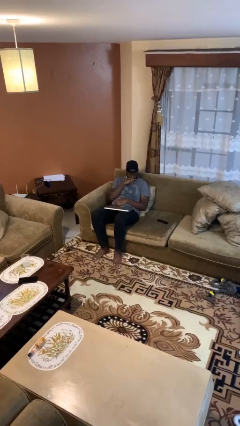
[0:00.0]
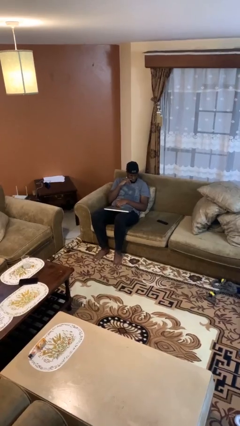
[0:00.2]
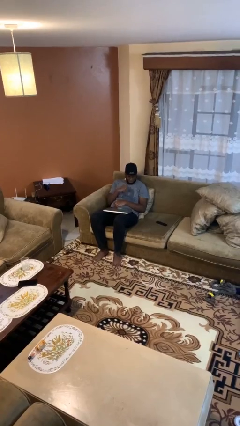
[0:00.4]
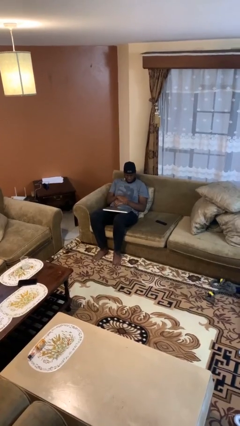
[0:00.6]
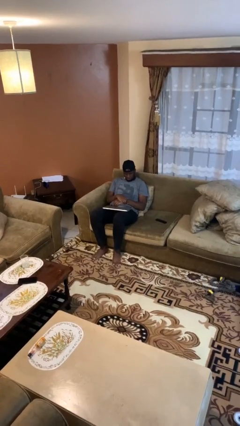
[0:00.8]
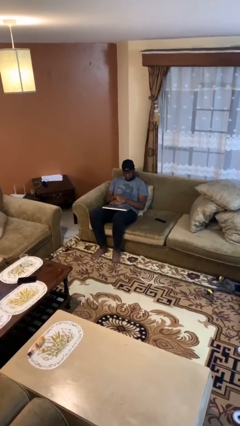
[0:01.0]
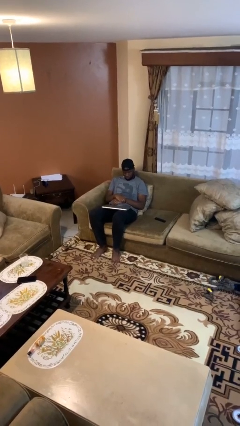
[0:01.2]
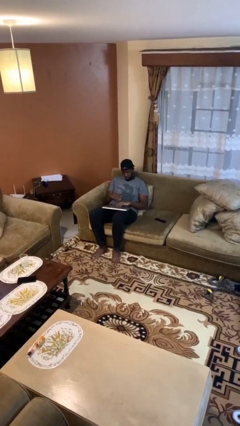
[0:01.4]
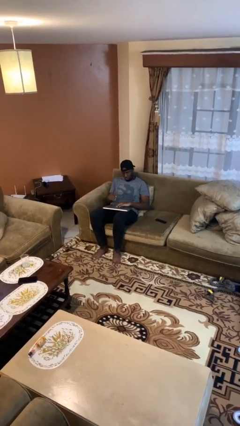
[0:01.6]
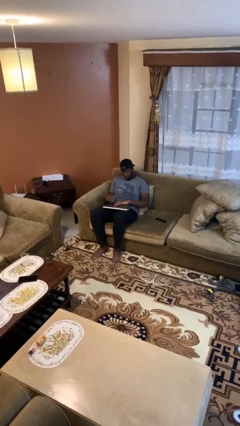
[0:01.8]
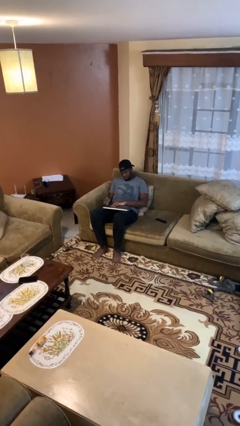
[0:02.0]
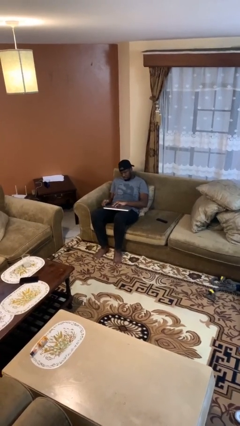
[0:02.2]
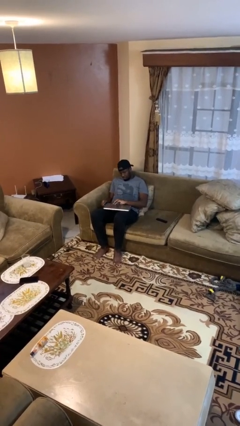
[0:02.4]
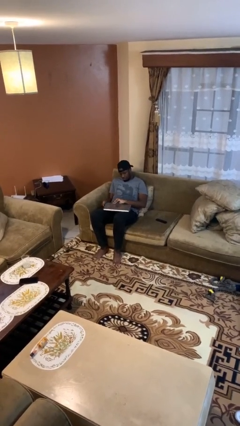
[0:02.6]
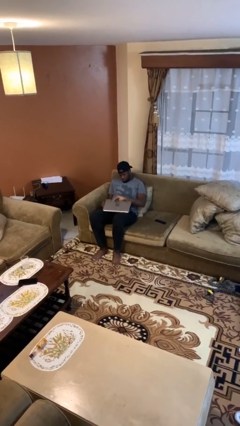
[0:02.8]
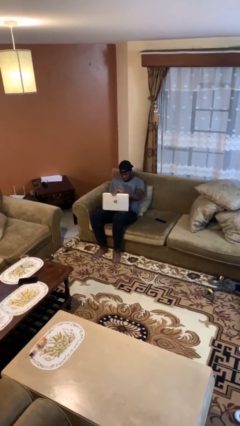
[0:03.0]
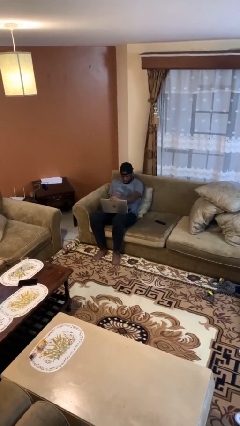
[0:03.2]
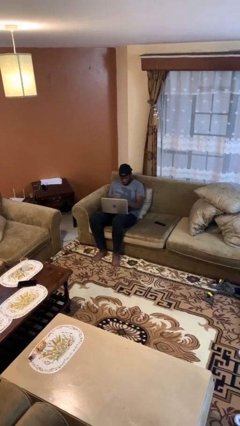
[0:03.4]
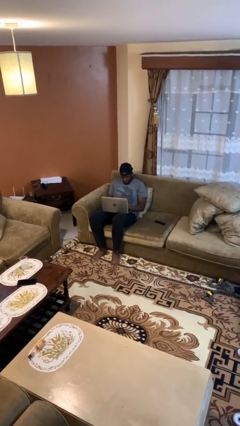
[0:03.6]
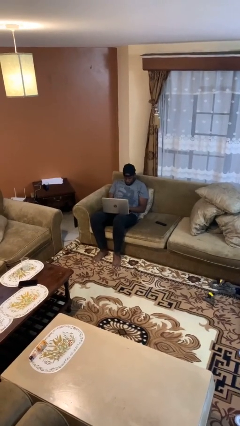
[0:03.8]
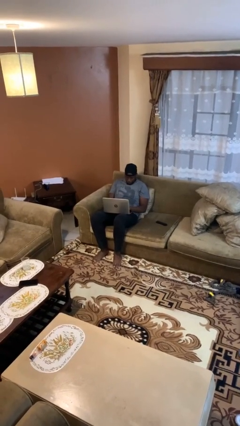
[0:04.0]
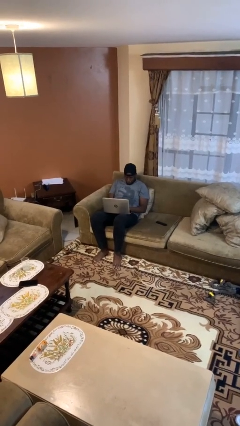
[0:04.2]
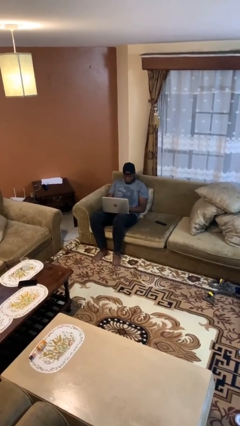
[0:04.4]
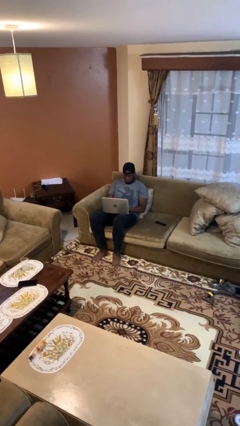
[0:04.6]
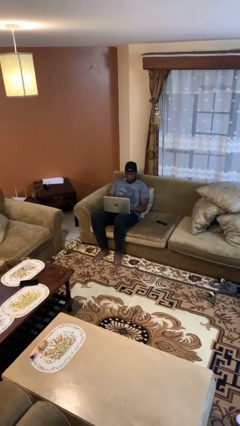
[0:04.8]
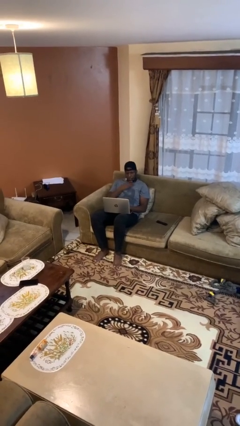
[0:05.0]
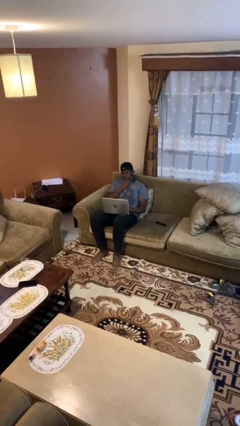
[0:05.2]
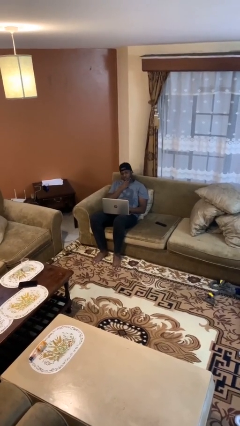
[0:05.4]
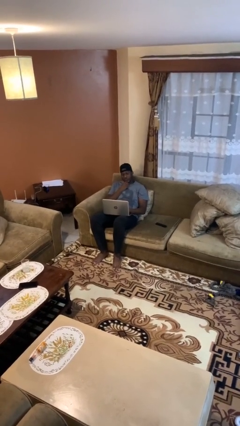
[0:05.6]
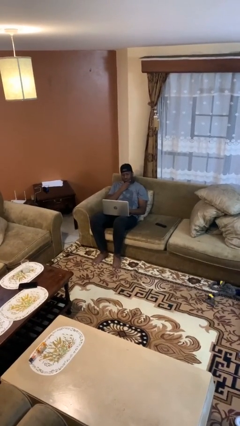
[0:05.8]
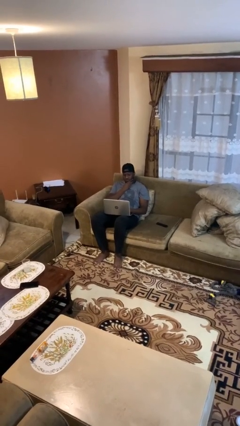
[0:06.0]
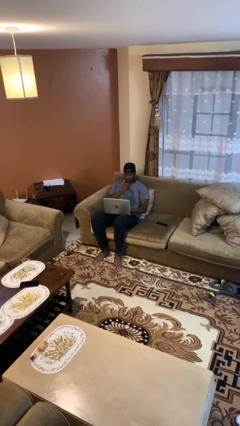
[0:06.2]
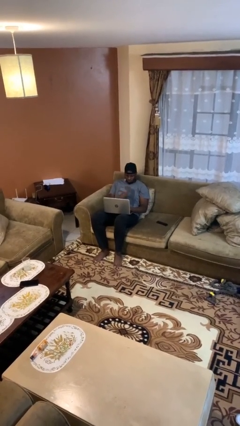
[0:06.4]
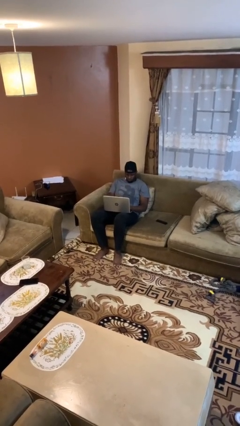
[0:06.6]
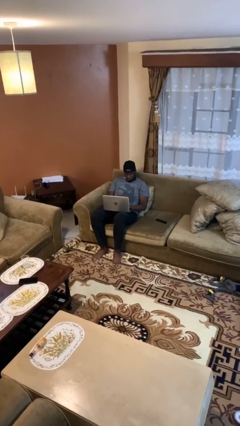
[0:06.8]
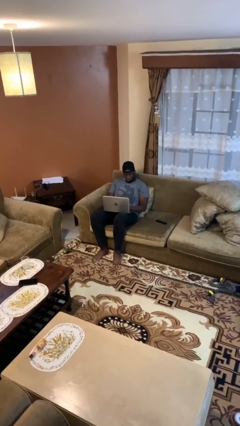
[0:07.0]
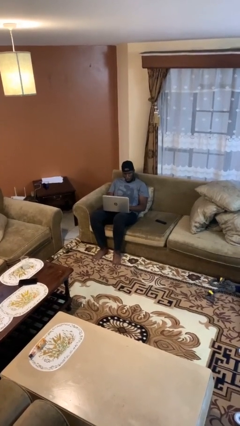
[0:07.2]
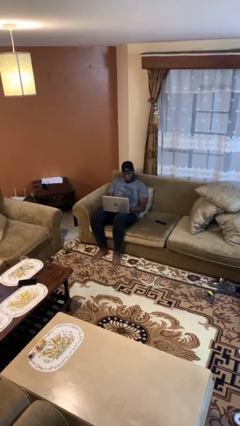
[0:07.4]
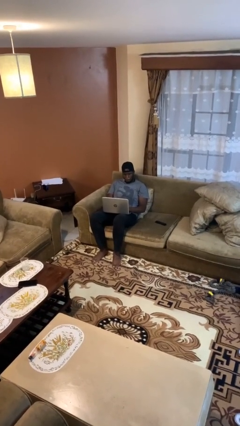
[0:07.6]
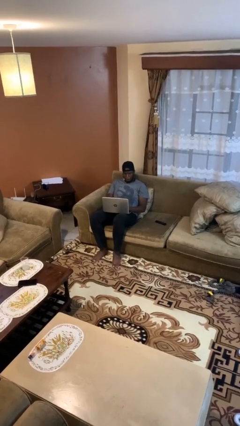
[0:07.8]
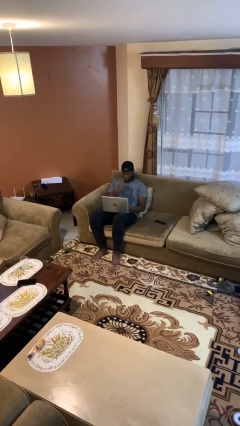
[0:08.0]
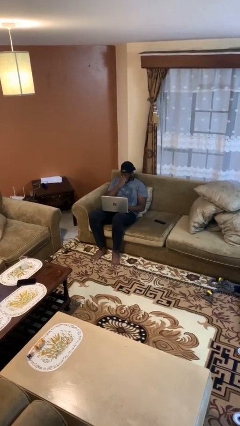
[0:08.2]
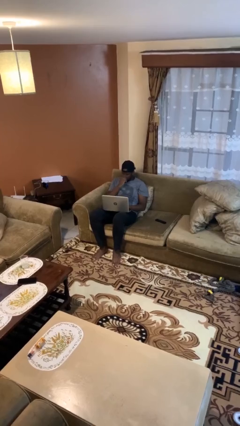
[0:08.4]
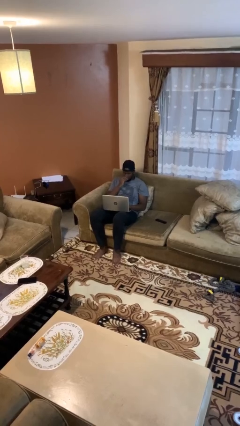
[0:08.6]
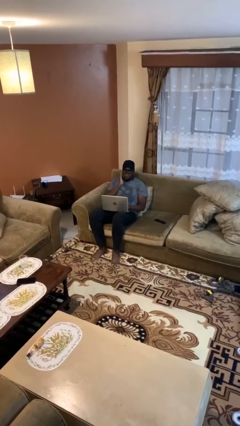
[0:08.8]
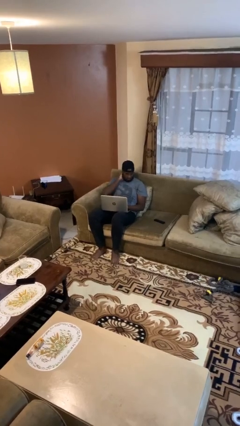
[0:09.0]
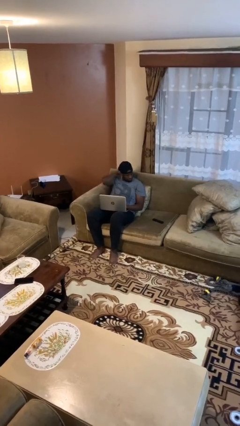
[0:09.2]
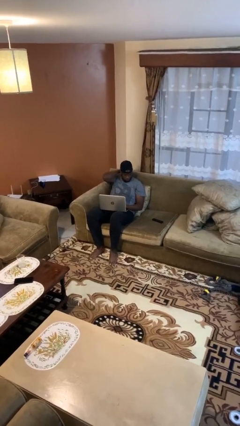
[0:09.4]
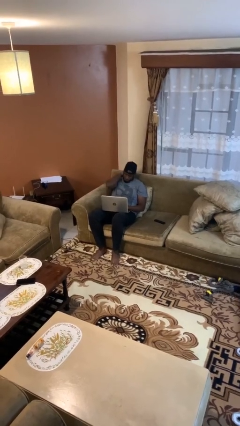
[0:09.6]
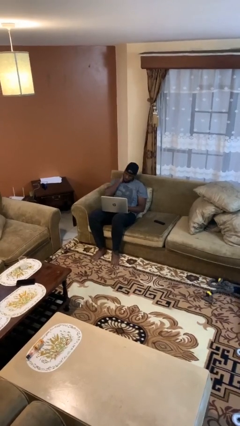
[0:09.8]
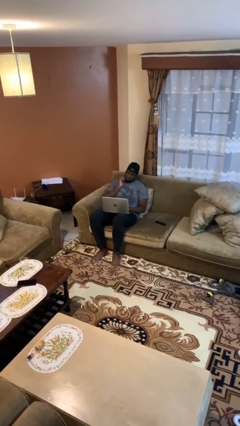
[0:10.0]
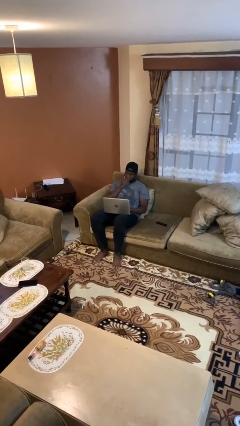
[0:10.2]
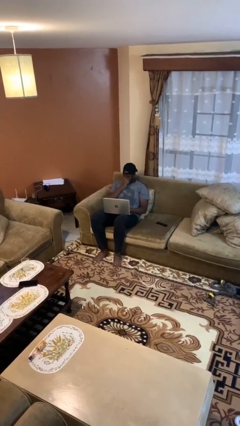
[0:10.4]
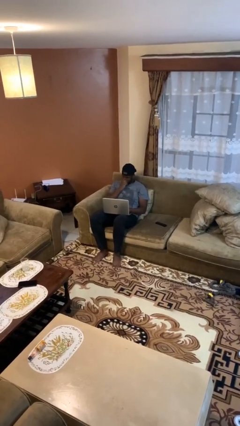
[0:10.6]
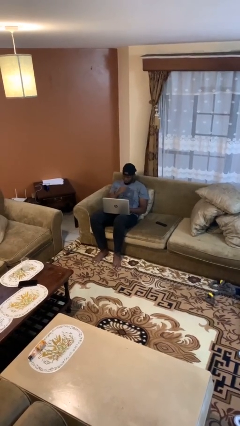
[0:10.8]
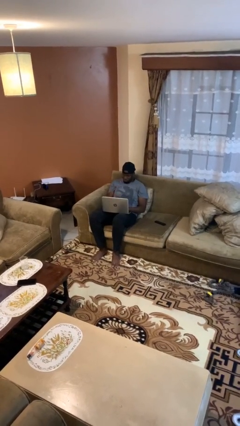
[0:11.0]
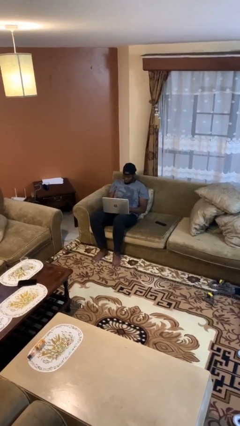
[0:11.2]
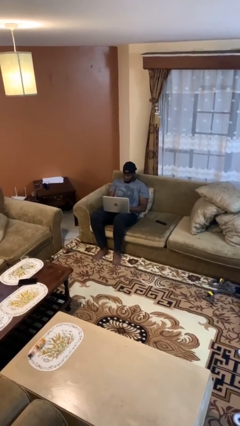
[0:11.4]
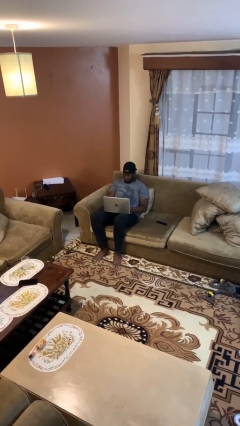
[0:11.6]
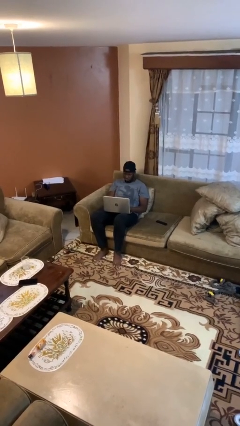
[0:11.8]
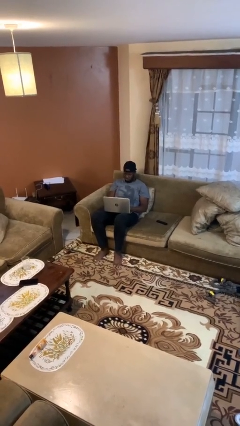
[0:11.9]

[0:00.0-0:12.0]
person interacts with laptop

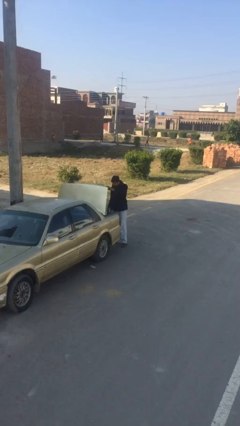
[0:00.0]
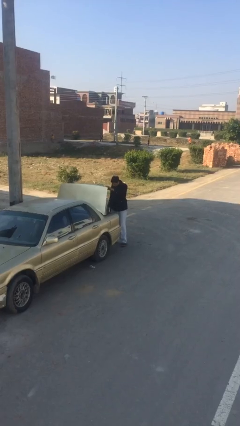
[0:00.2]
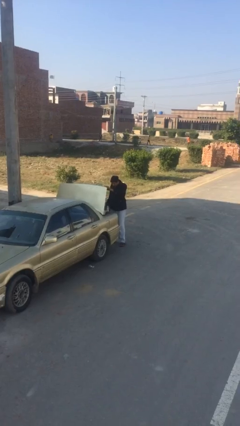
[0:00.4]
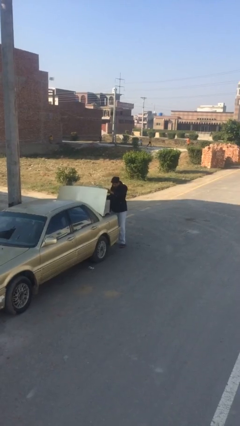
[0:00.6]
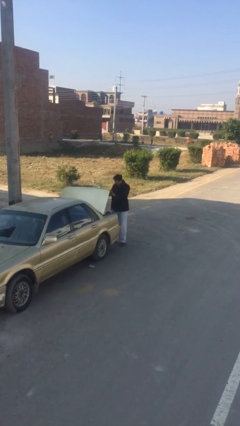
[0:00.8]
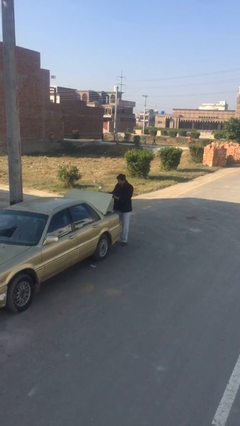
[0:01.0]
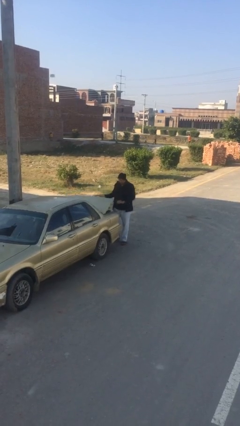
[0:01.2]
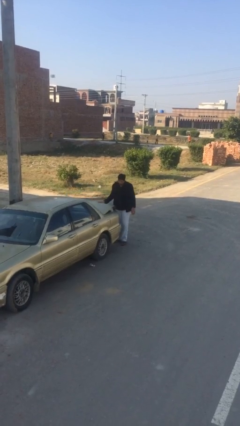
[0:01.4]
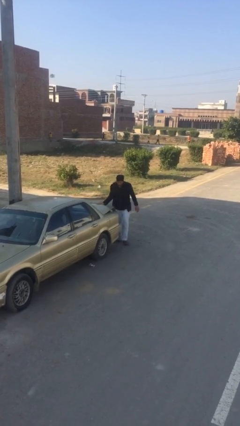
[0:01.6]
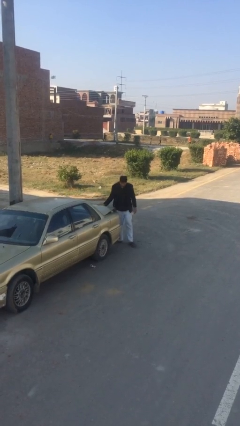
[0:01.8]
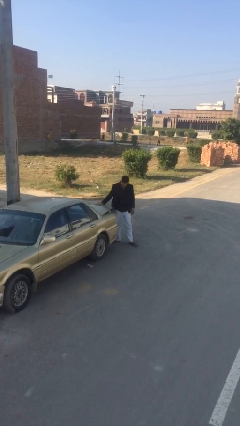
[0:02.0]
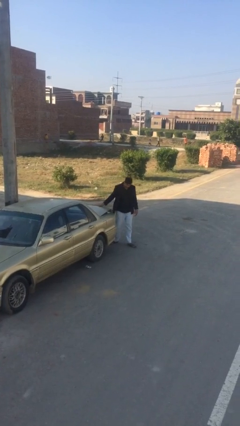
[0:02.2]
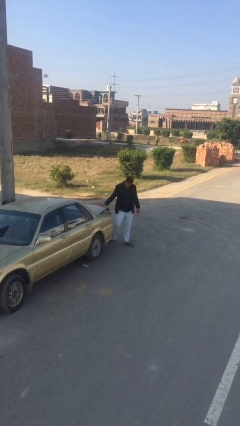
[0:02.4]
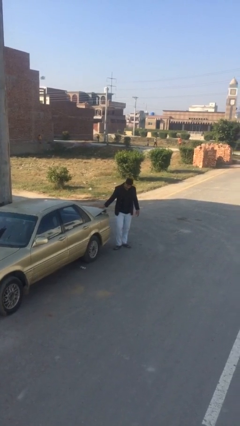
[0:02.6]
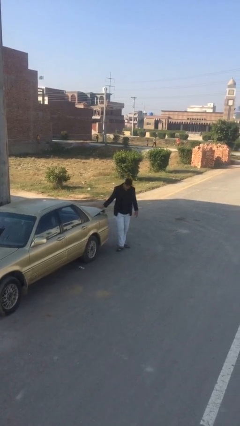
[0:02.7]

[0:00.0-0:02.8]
person closes car trunk

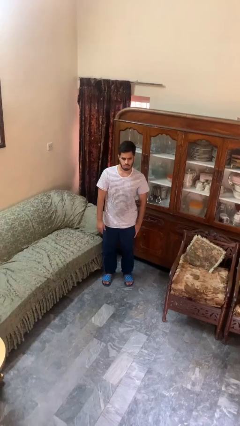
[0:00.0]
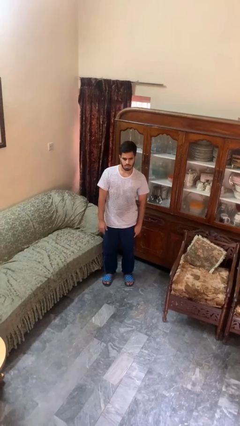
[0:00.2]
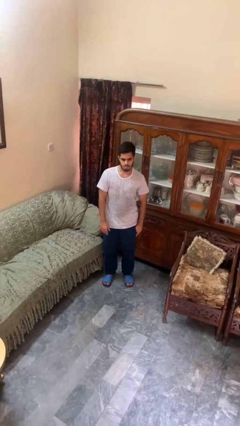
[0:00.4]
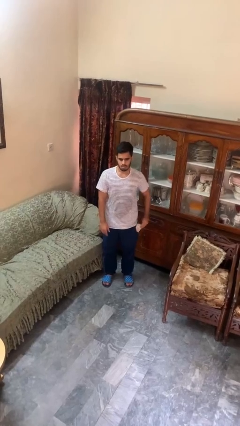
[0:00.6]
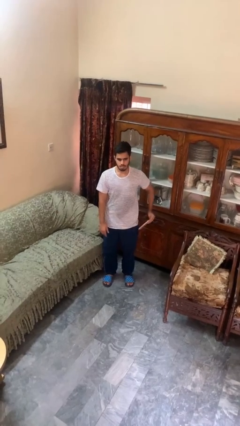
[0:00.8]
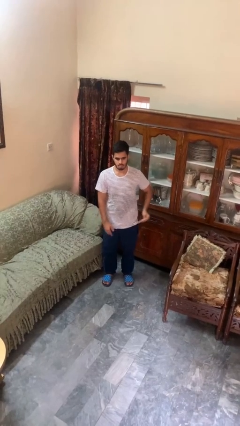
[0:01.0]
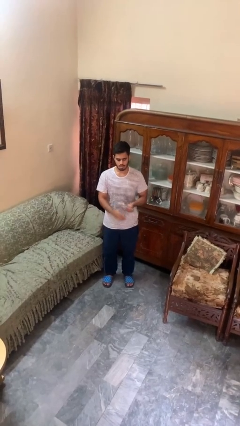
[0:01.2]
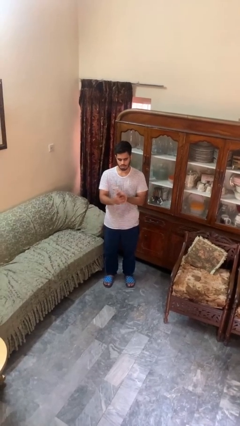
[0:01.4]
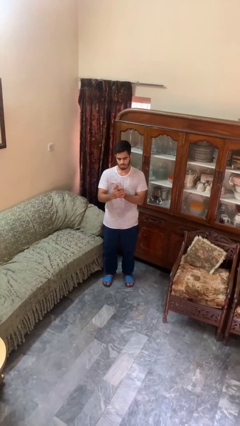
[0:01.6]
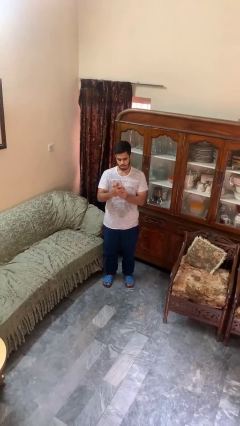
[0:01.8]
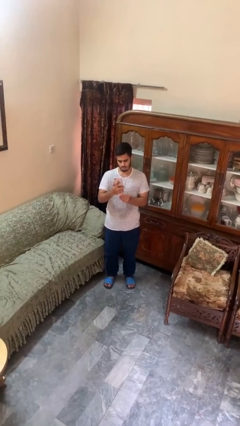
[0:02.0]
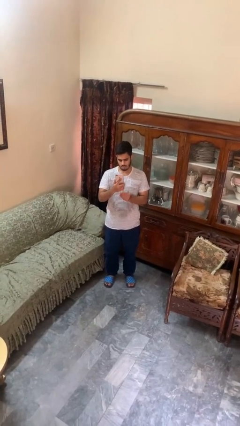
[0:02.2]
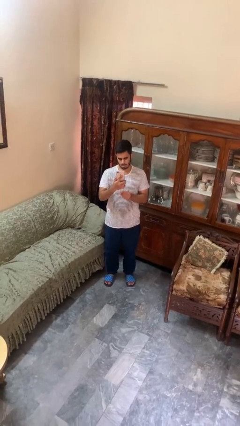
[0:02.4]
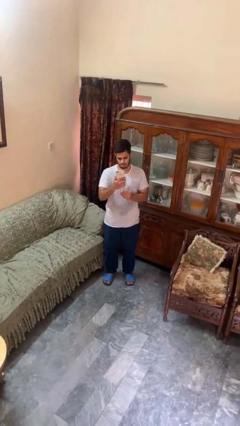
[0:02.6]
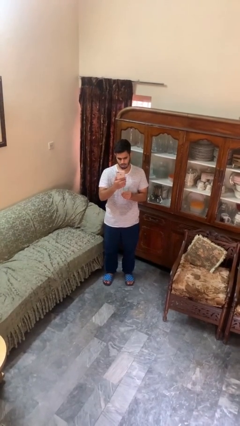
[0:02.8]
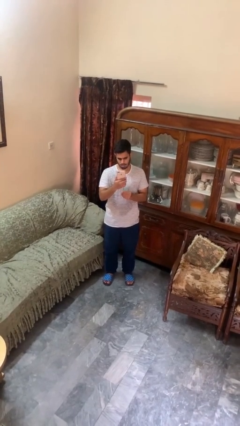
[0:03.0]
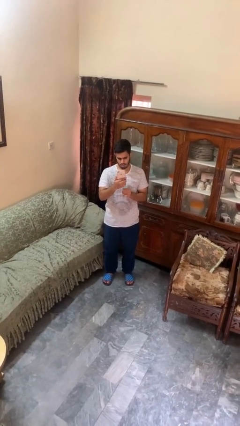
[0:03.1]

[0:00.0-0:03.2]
person takes phone from pocket
